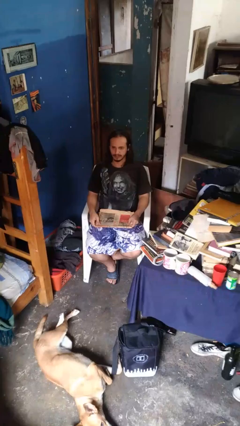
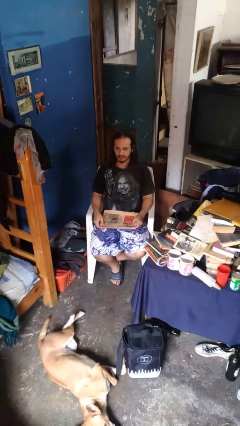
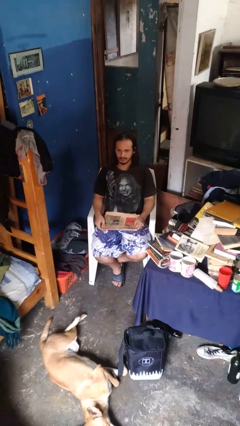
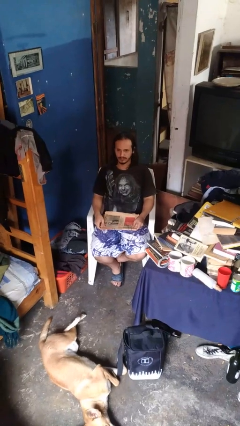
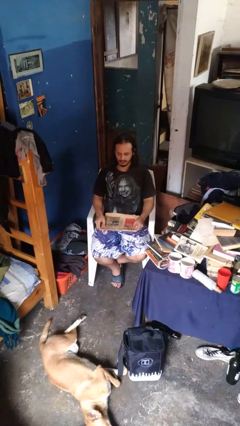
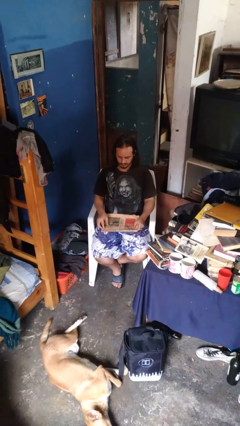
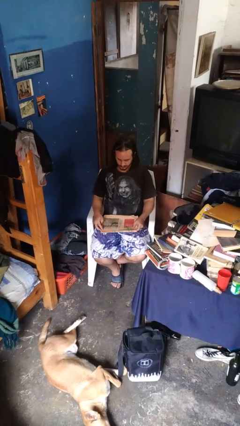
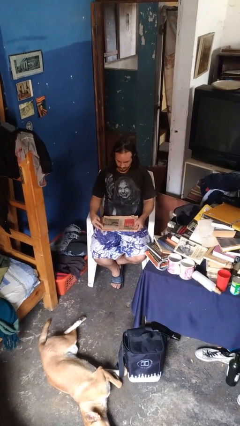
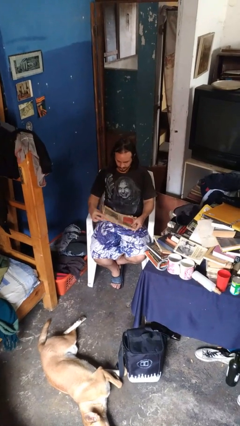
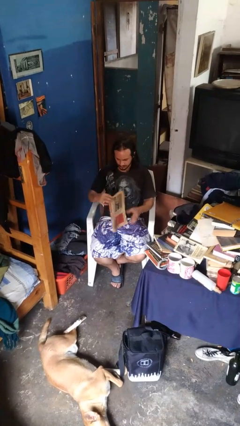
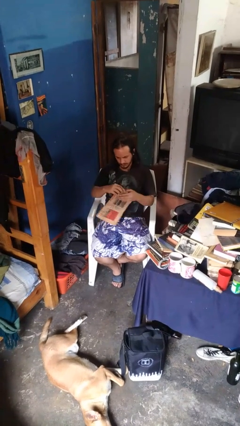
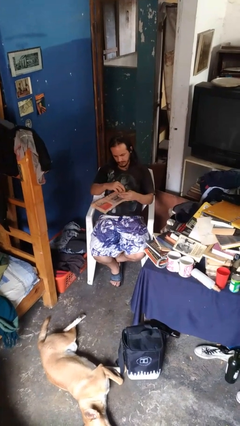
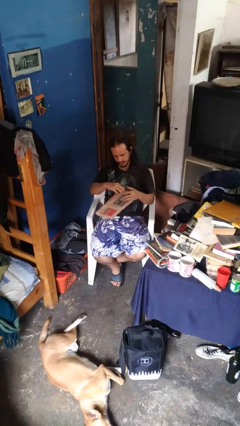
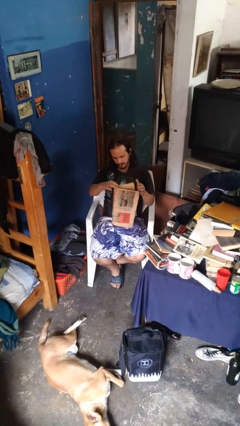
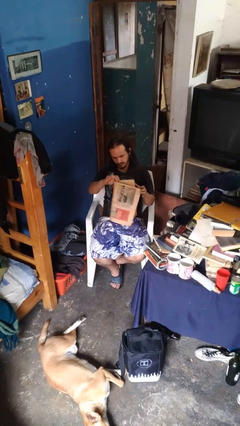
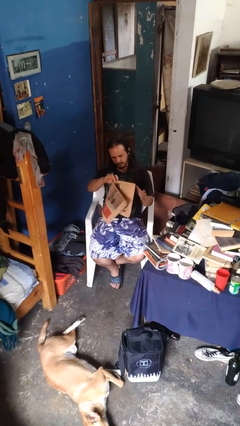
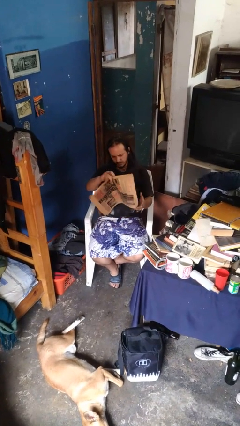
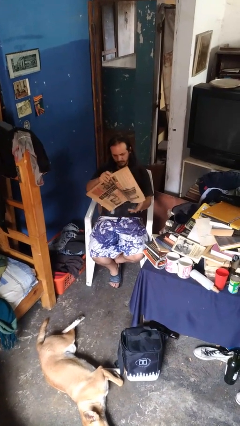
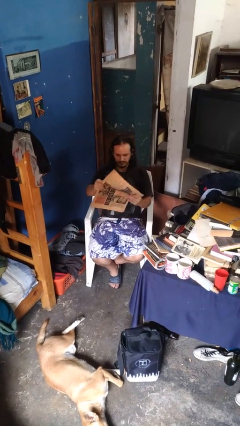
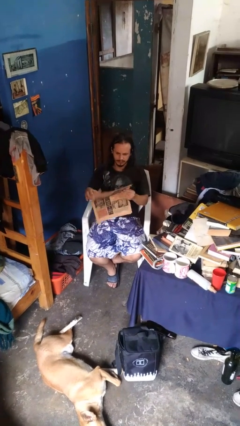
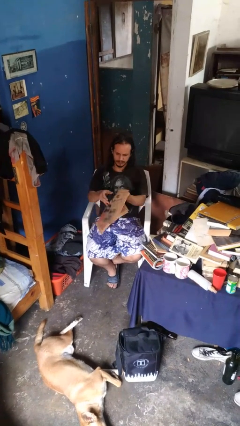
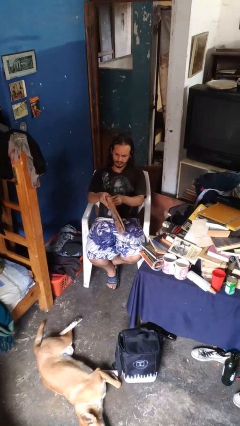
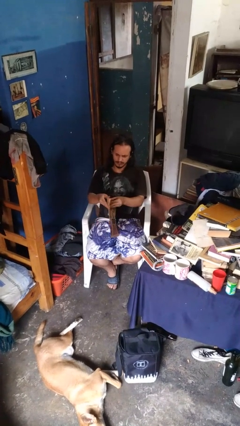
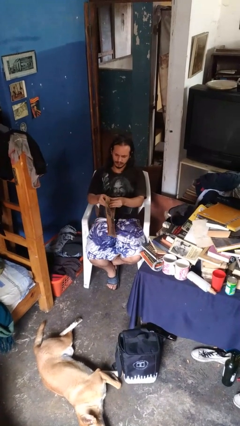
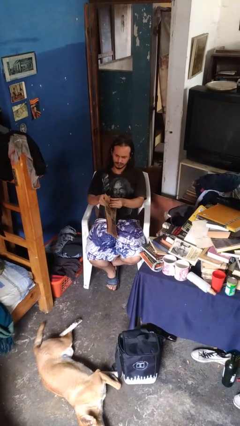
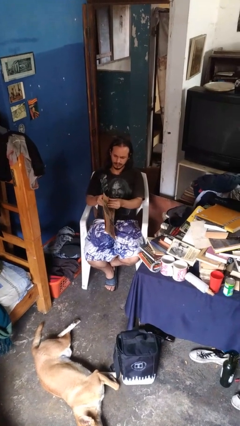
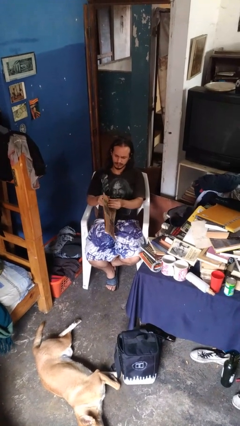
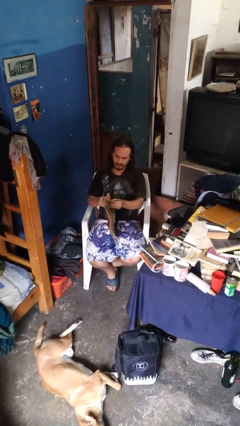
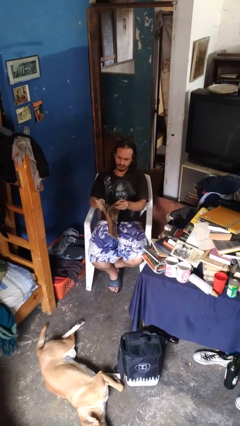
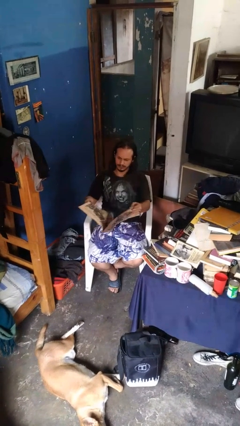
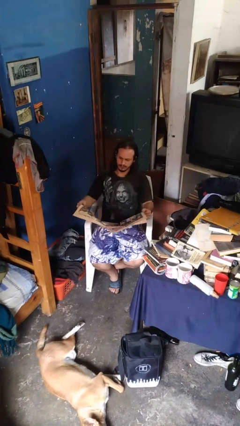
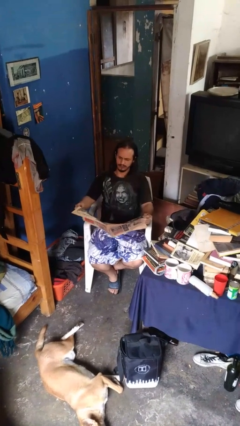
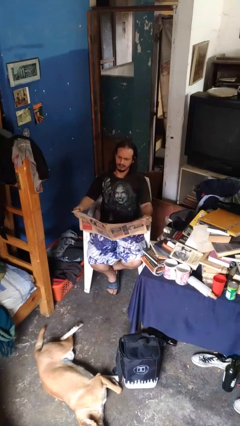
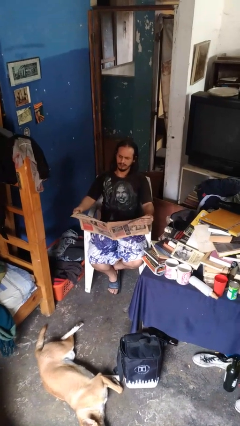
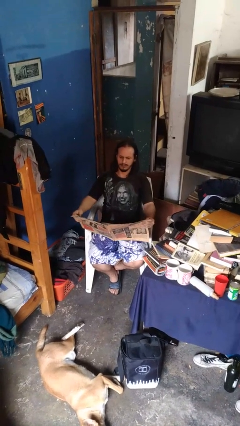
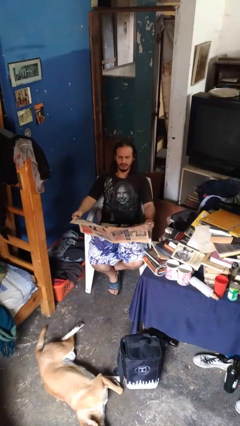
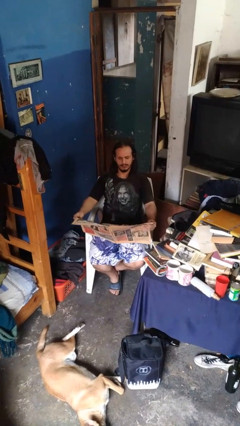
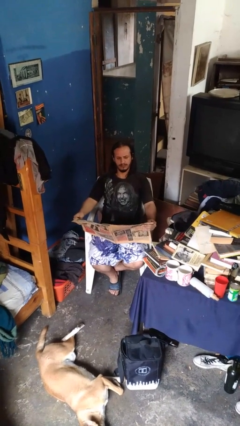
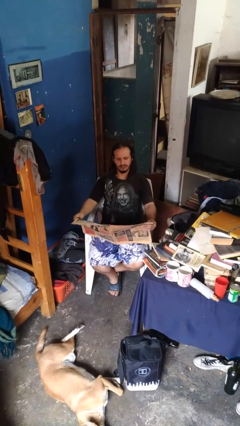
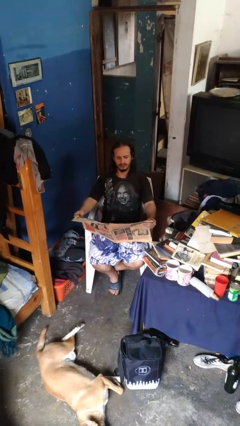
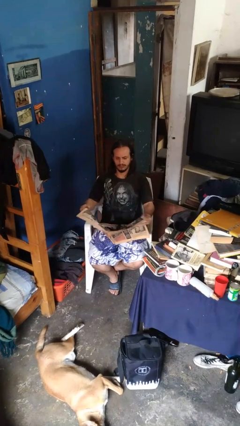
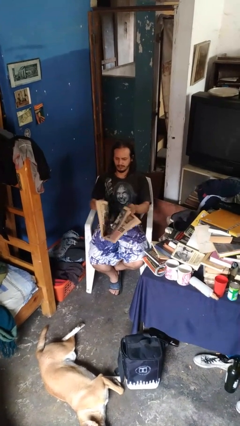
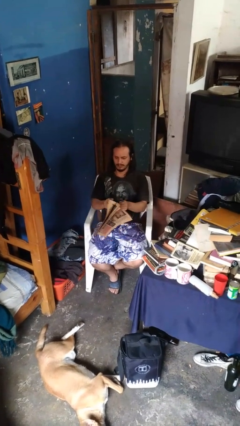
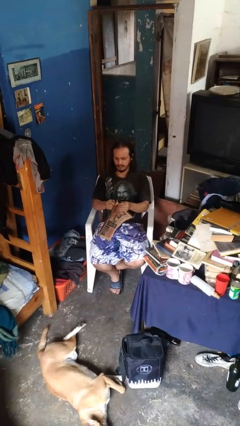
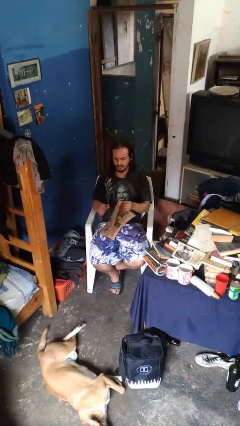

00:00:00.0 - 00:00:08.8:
person reads newspaper

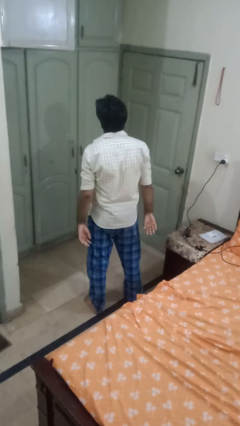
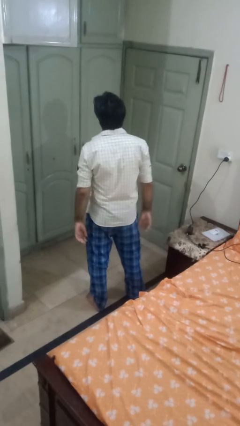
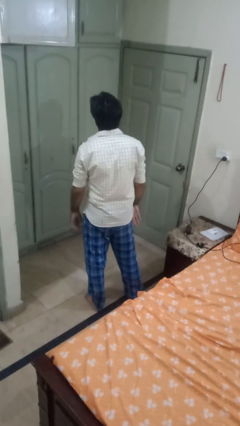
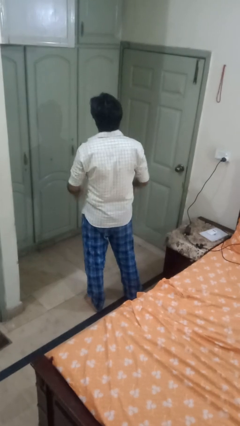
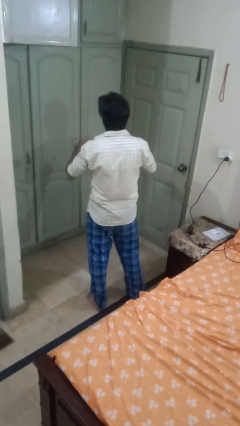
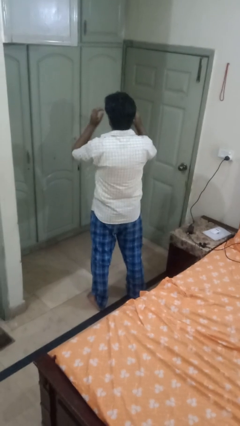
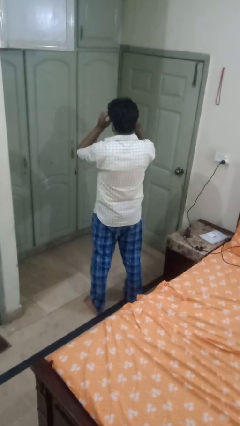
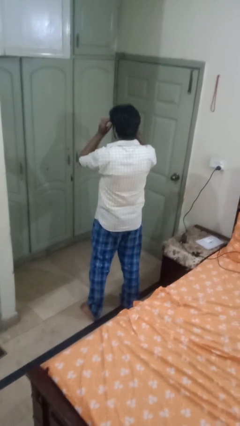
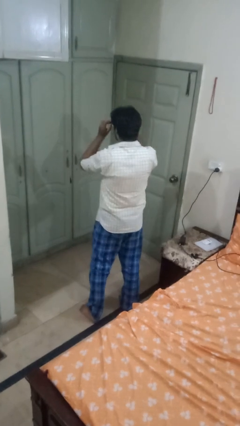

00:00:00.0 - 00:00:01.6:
person takes off glasses

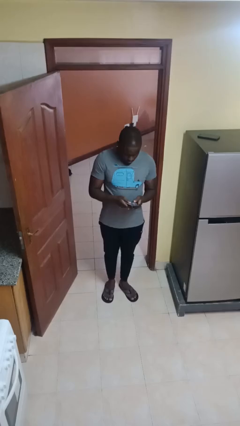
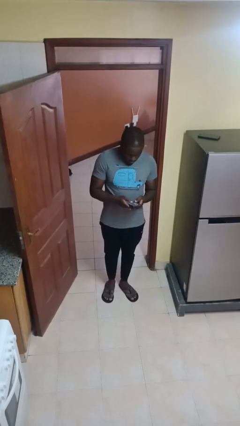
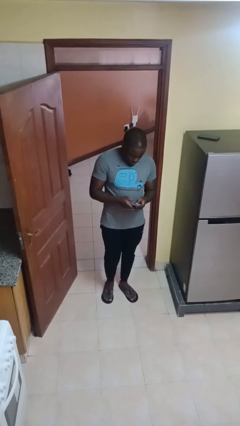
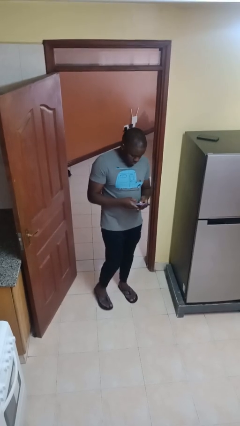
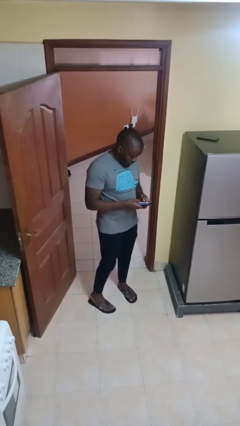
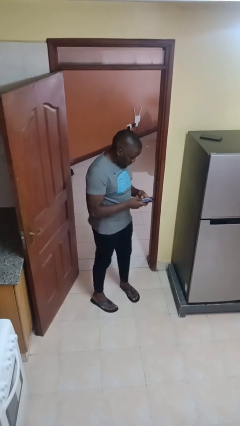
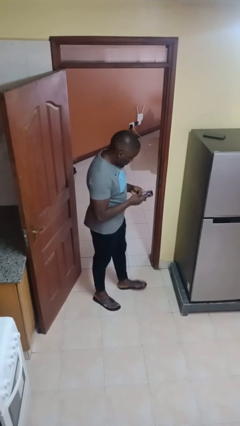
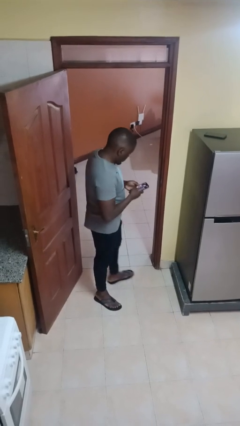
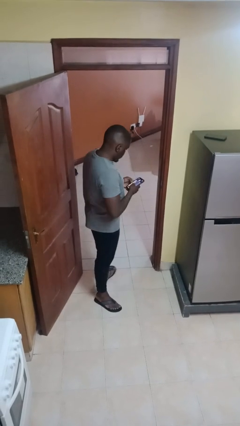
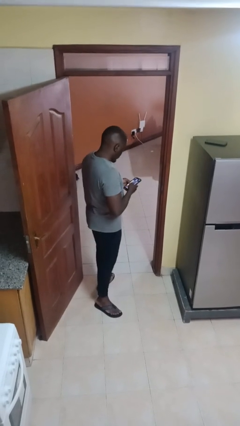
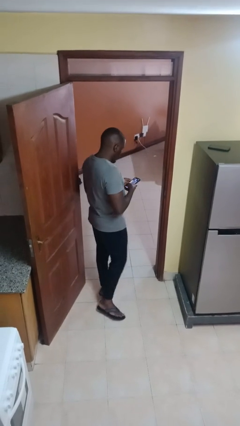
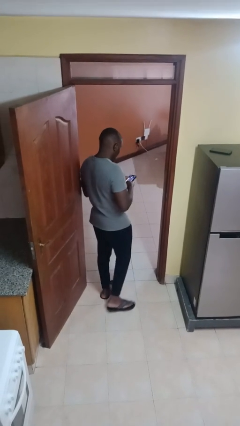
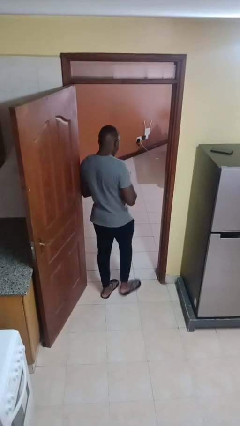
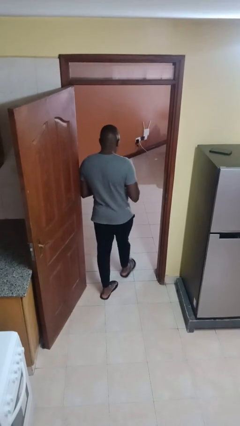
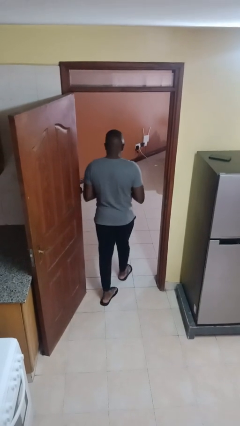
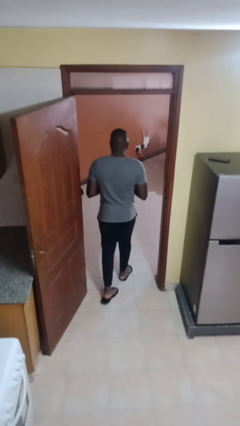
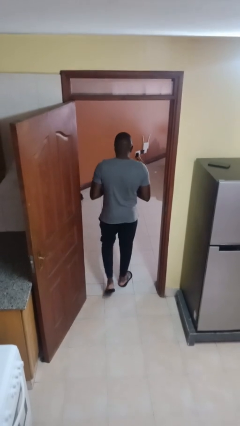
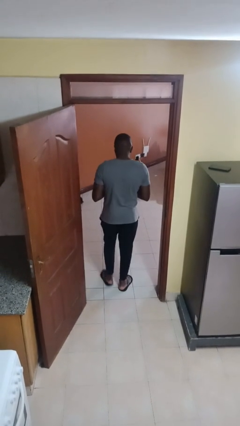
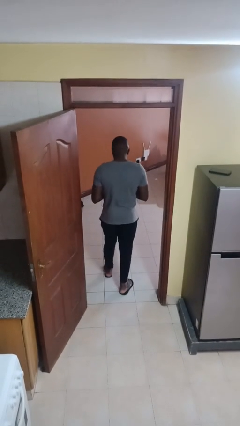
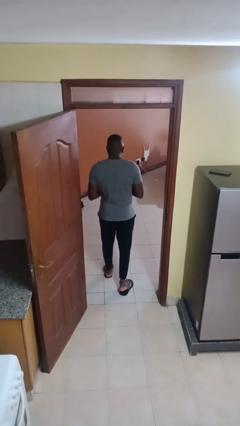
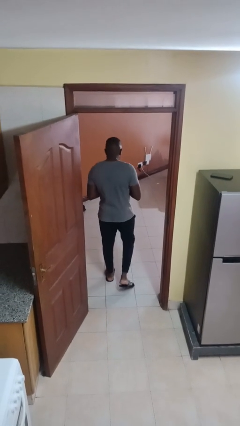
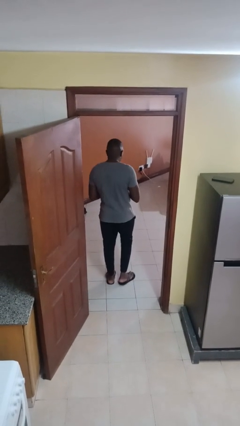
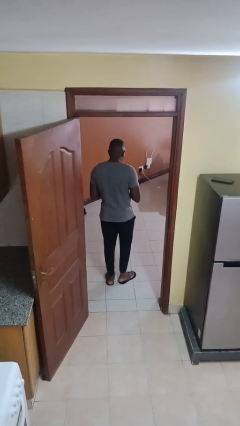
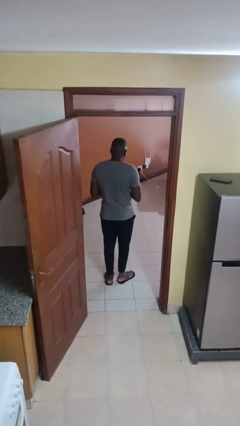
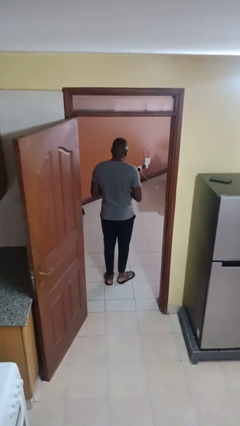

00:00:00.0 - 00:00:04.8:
person exits scene through structure

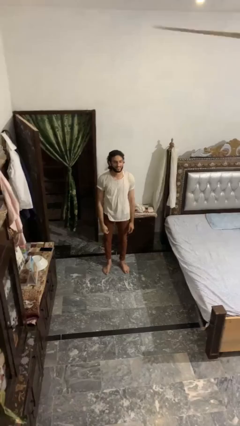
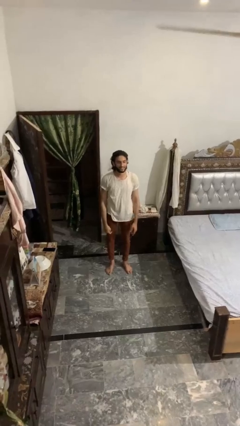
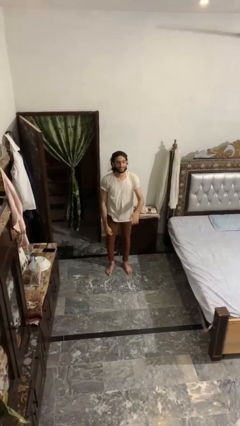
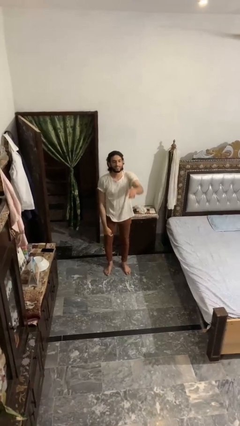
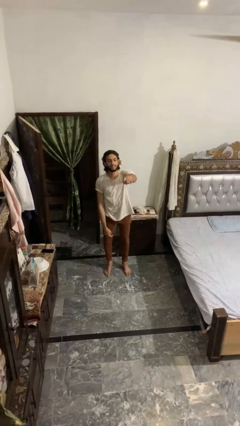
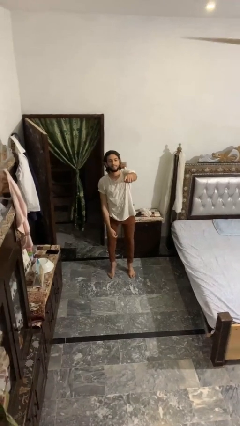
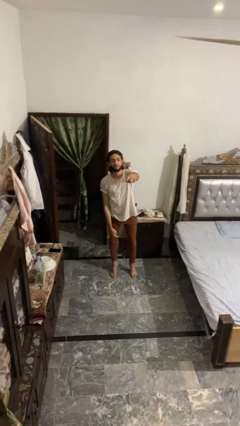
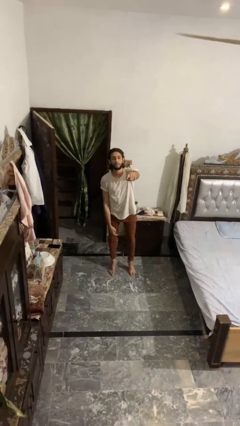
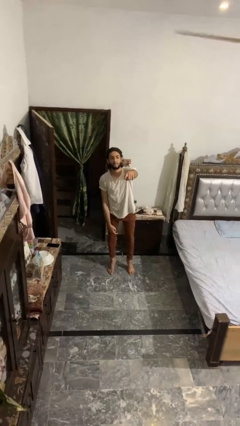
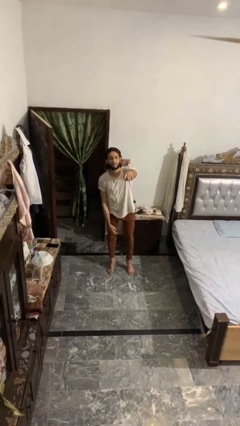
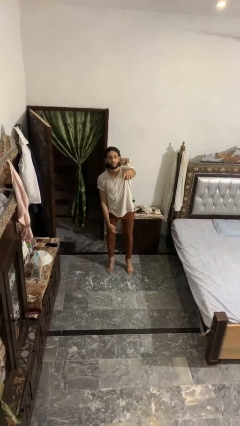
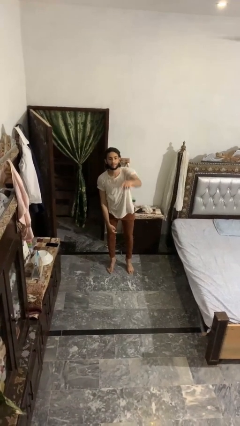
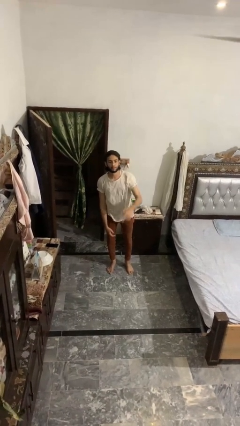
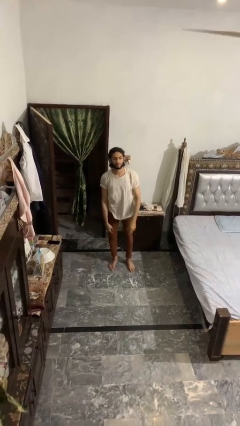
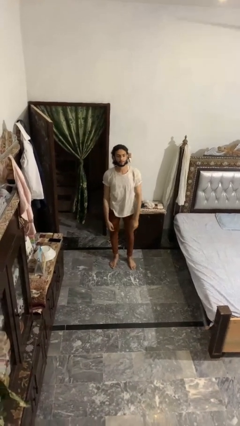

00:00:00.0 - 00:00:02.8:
person points at person
